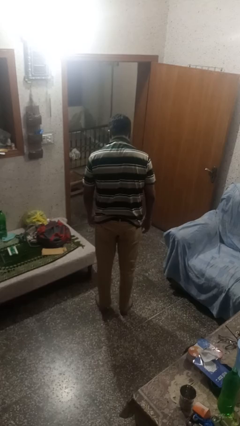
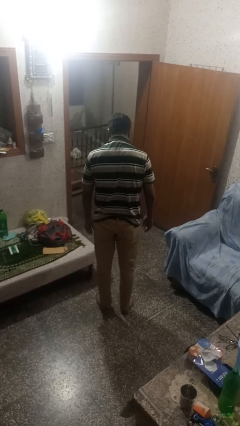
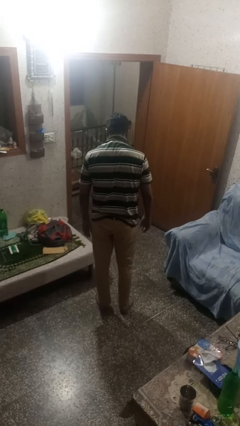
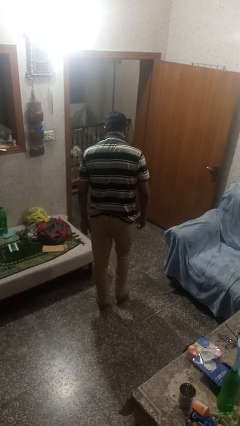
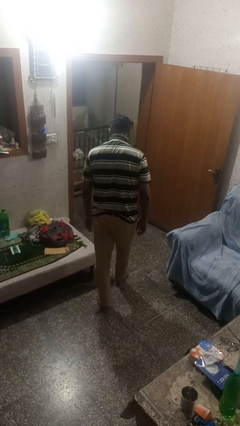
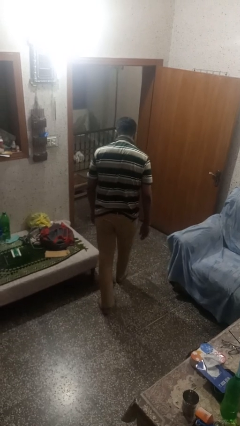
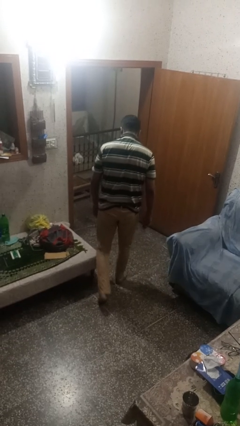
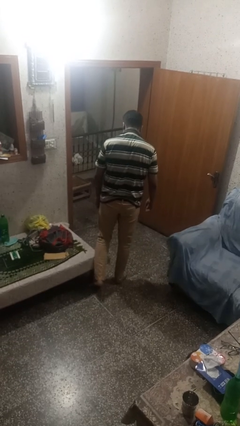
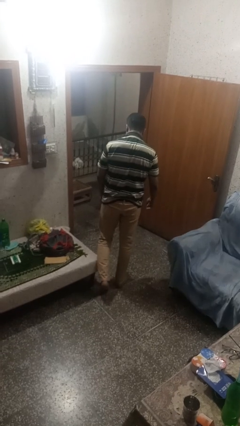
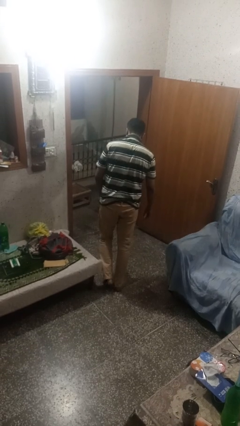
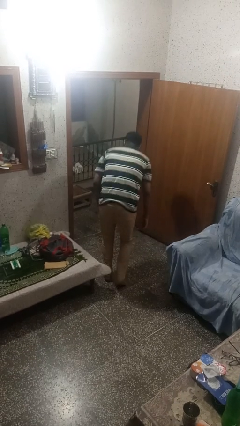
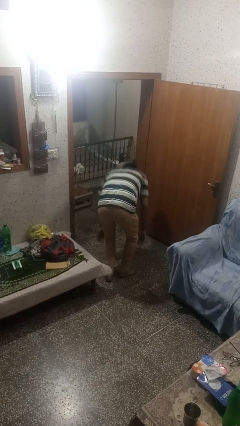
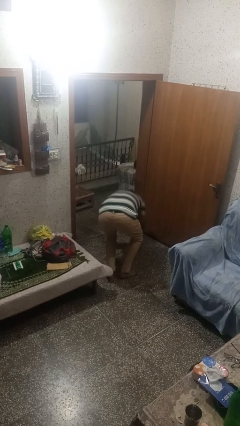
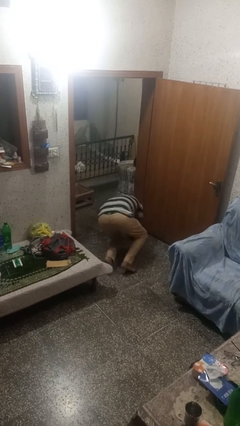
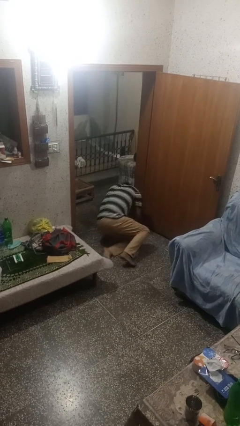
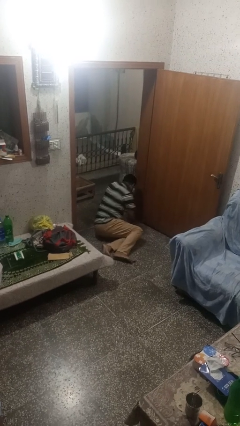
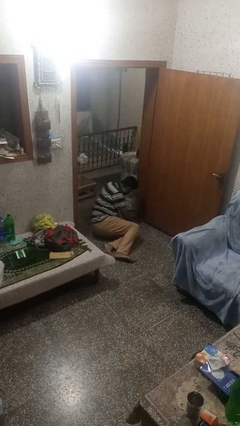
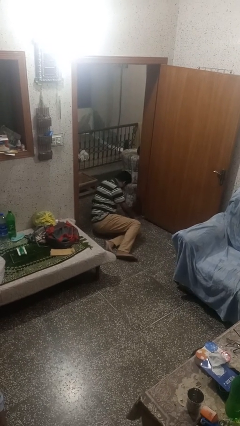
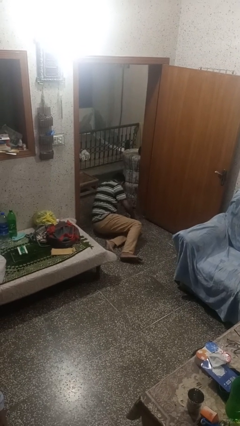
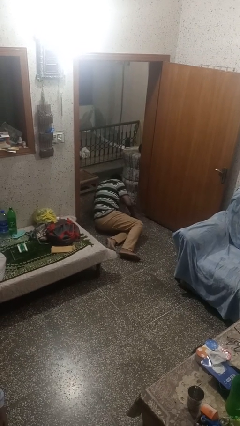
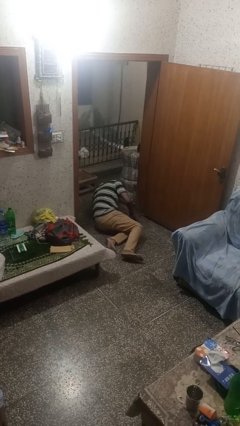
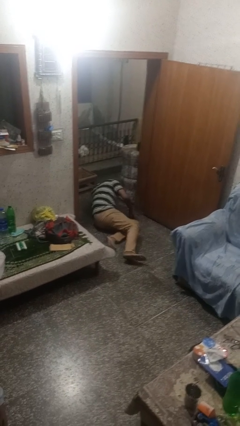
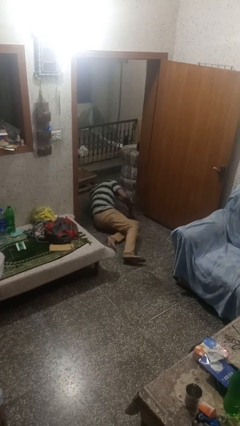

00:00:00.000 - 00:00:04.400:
person trips on object on floor

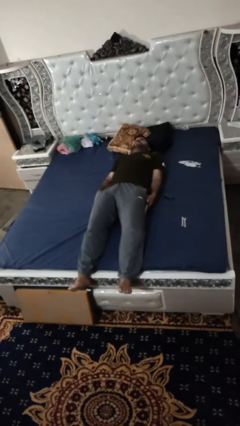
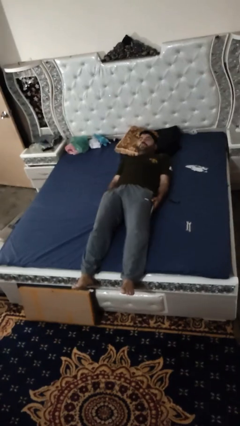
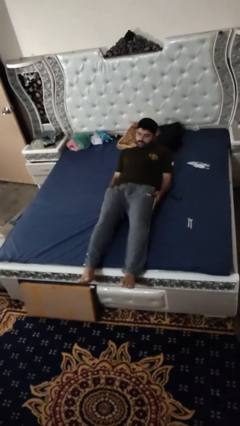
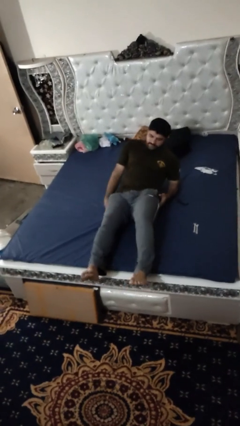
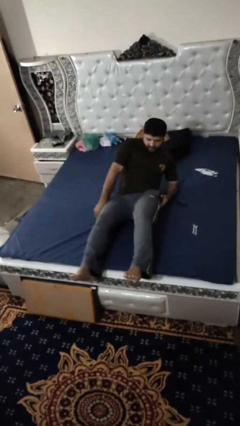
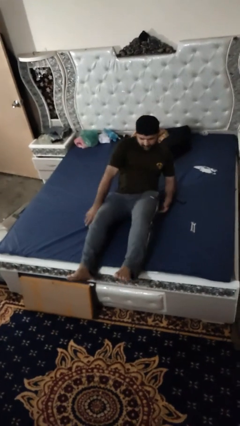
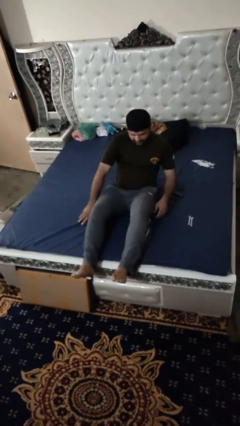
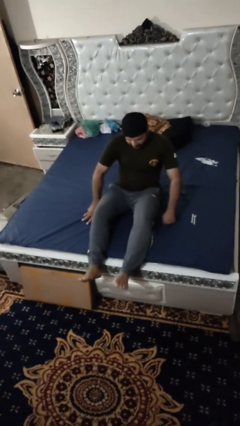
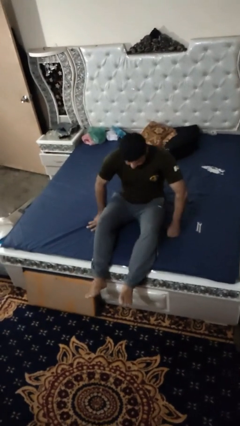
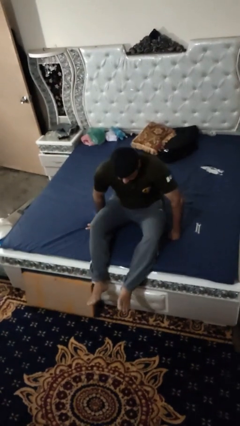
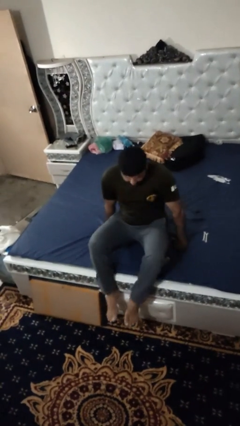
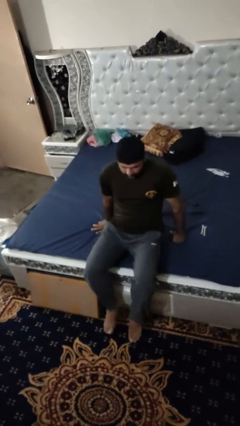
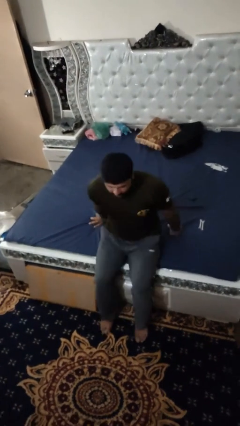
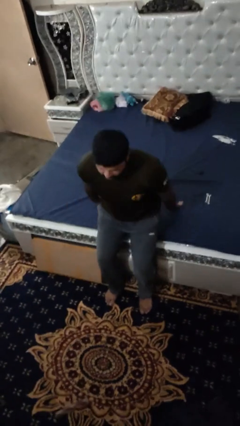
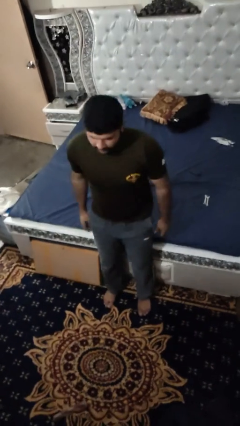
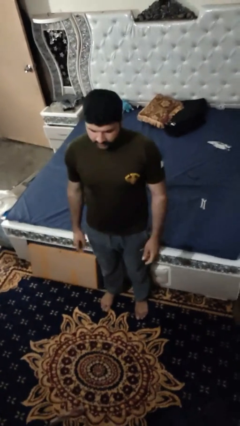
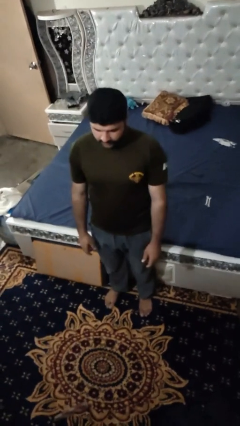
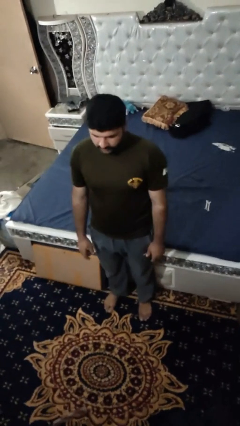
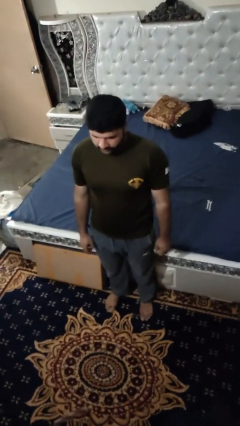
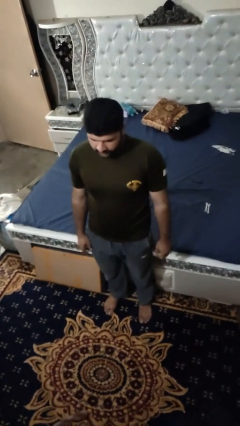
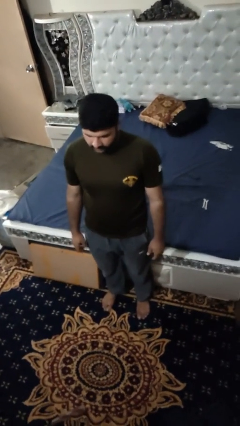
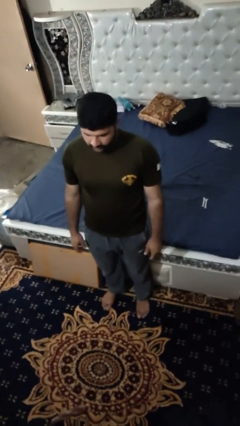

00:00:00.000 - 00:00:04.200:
person stands up

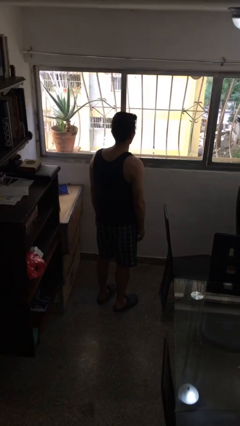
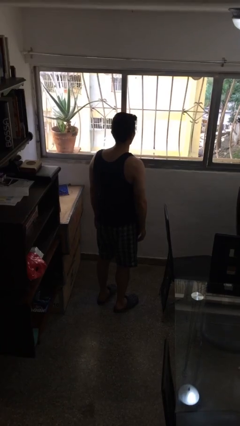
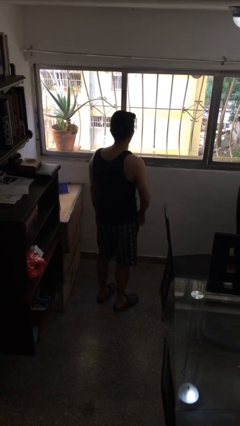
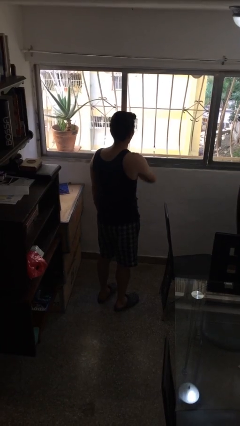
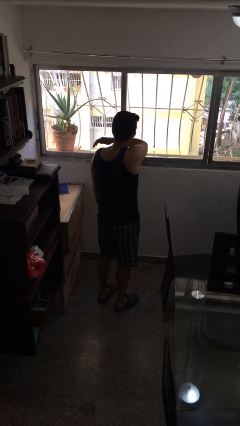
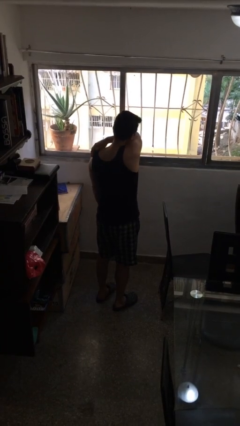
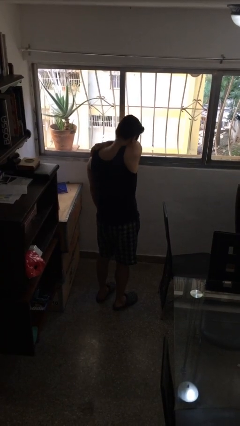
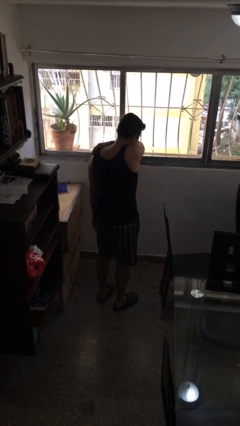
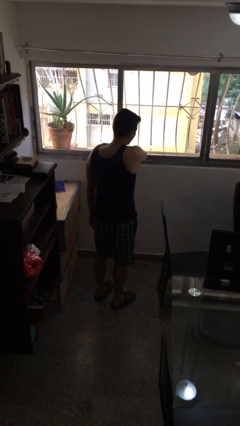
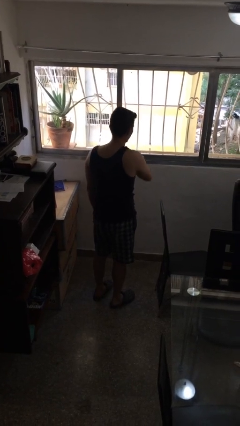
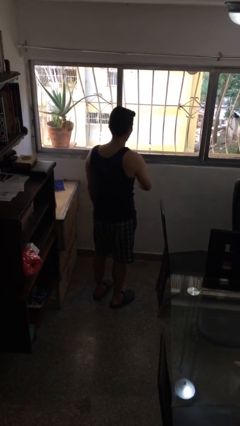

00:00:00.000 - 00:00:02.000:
person sneezes into arm

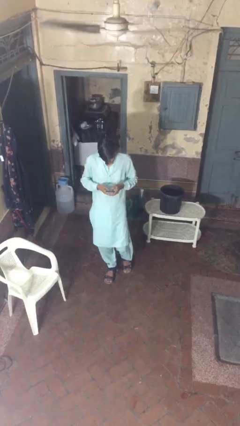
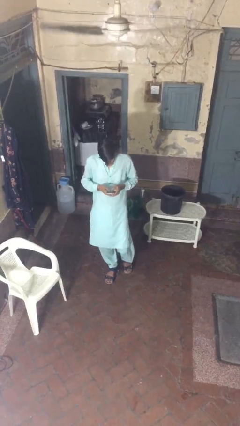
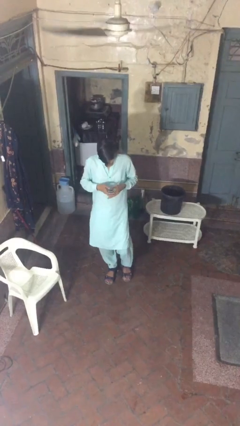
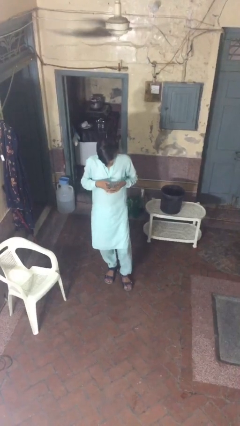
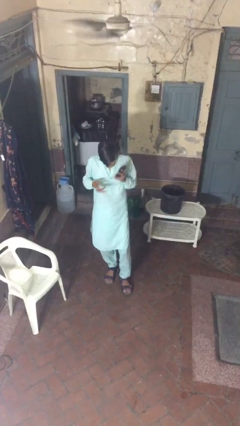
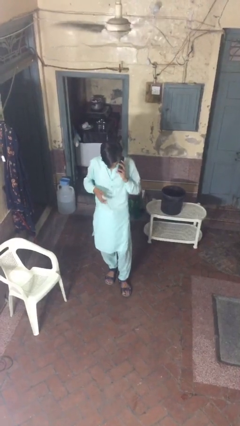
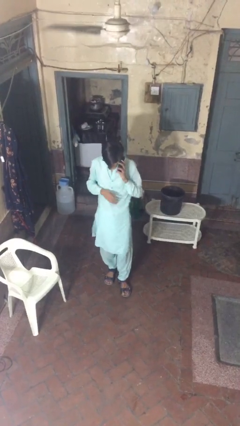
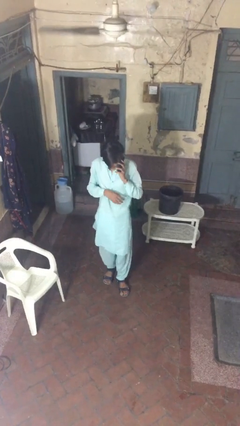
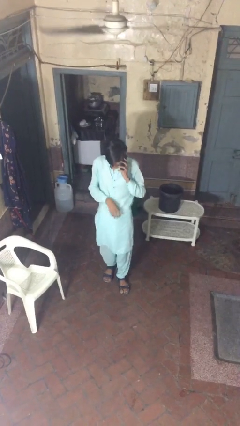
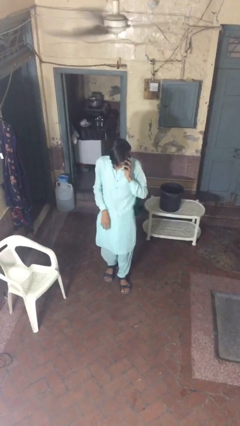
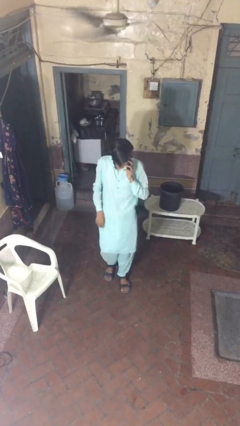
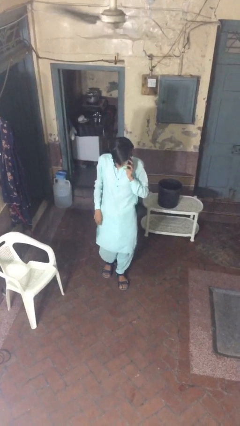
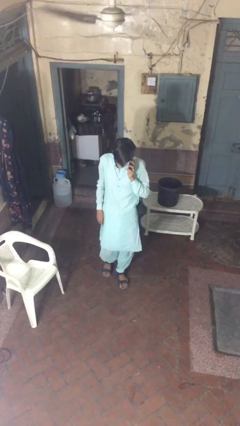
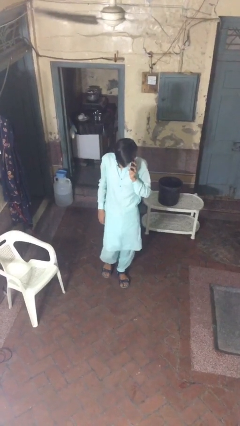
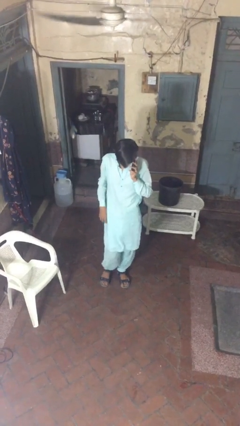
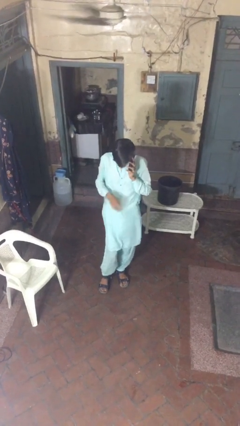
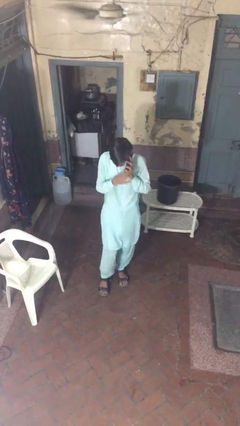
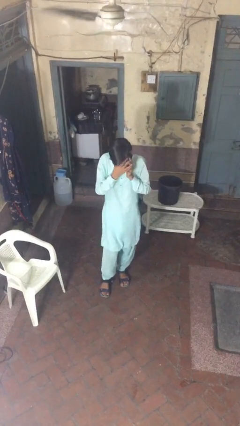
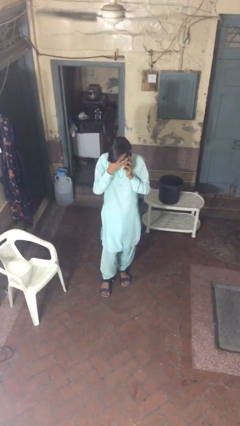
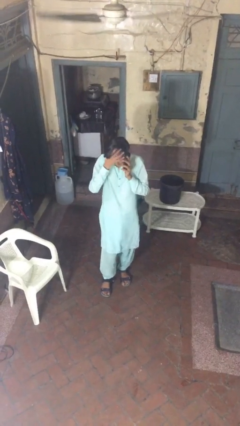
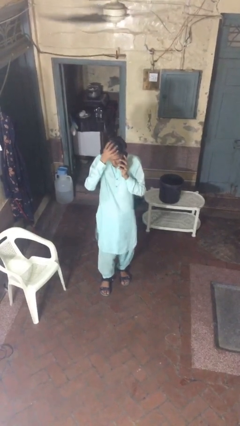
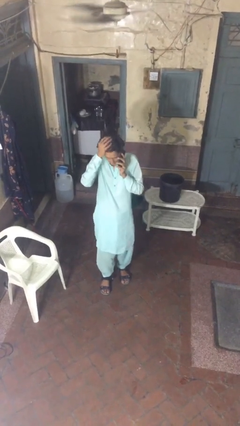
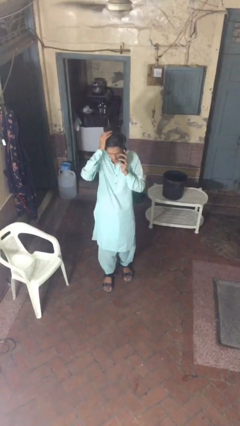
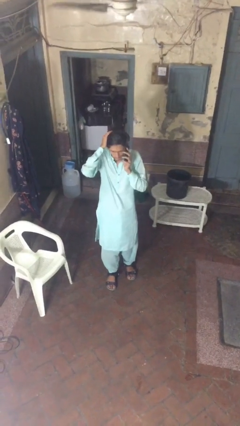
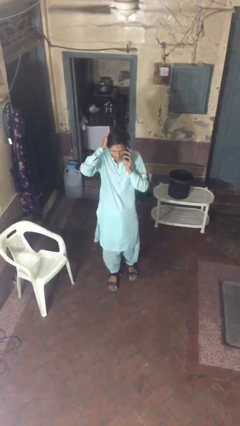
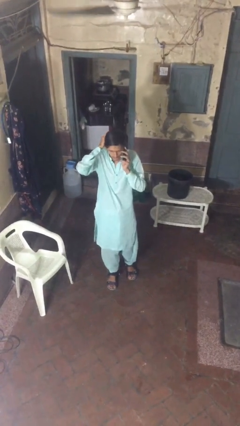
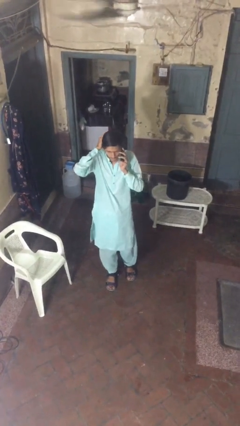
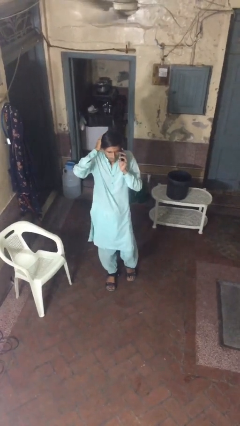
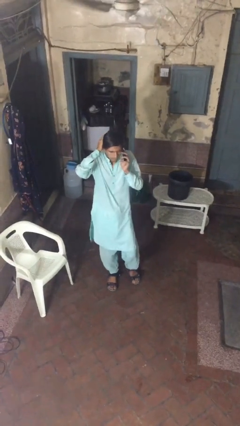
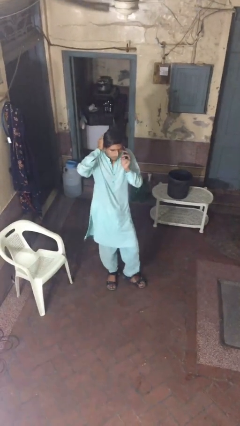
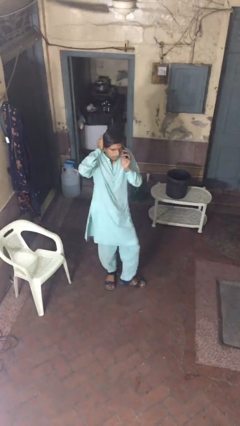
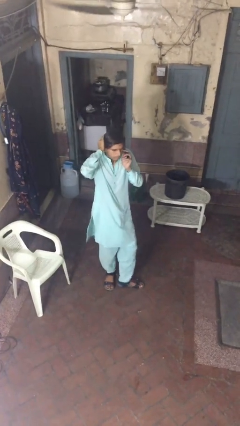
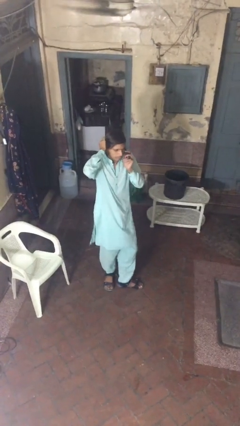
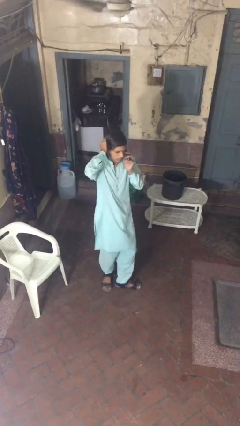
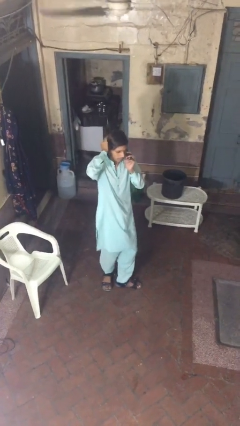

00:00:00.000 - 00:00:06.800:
person talks on phone

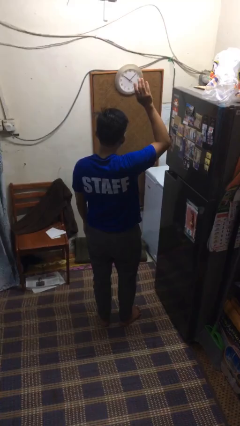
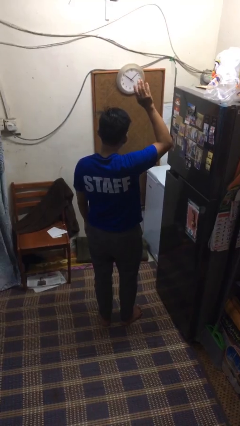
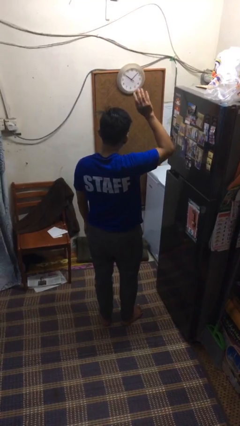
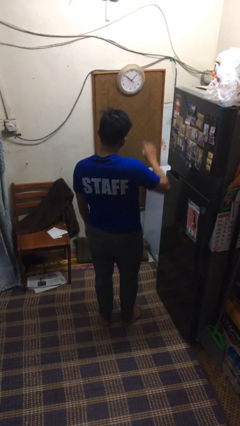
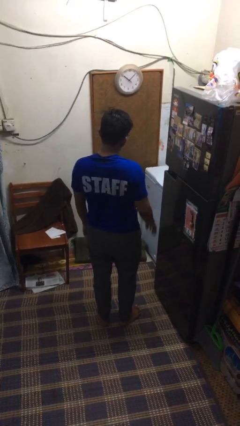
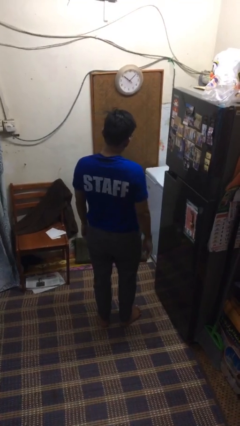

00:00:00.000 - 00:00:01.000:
person gestures lower hand
